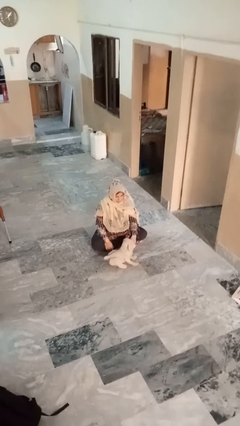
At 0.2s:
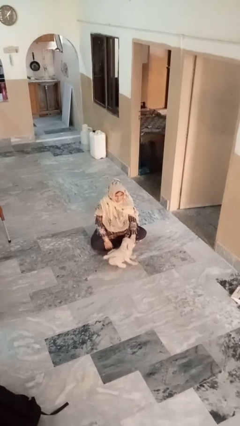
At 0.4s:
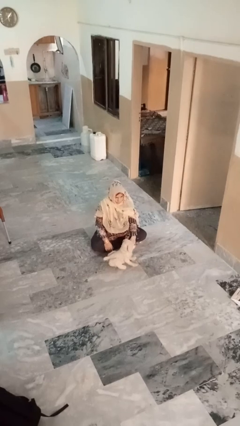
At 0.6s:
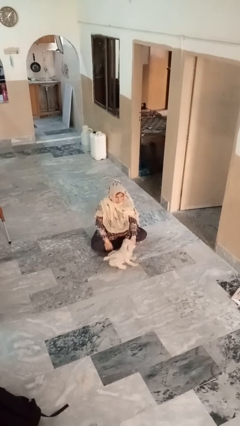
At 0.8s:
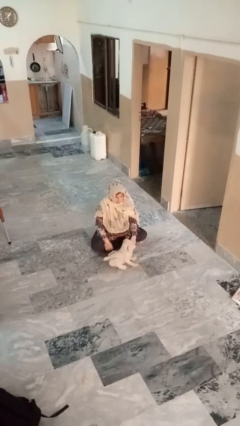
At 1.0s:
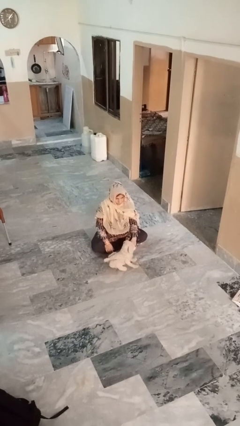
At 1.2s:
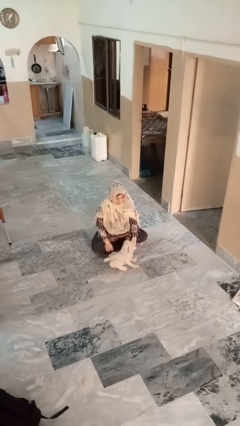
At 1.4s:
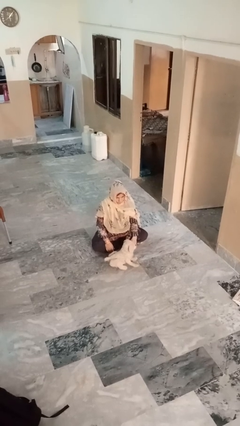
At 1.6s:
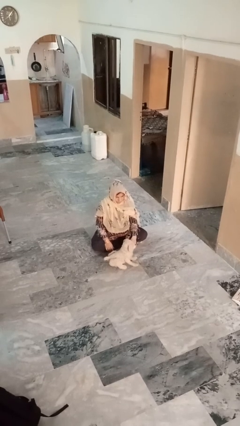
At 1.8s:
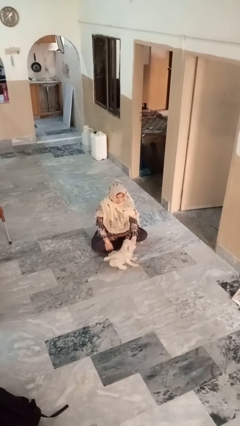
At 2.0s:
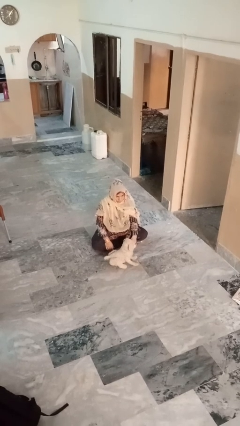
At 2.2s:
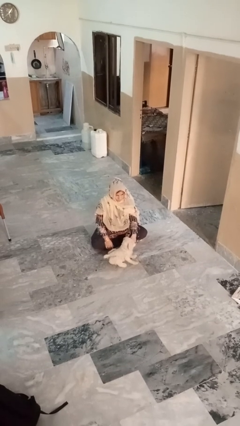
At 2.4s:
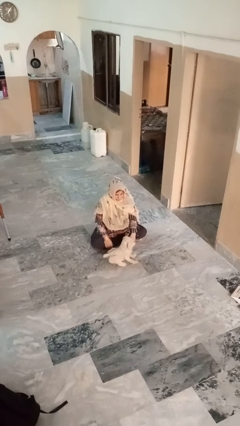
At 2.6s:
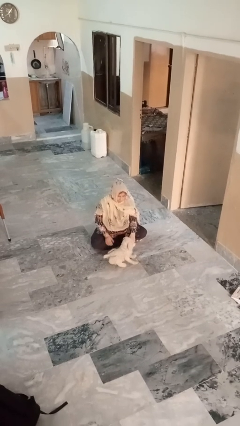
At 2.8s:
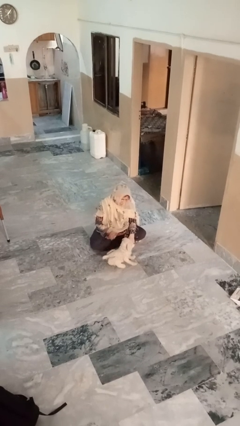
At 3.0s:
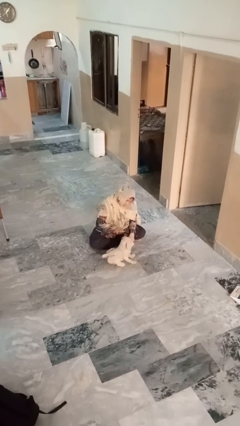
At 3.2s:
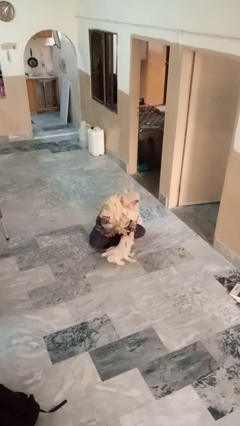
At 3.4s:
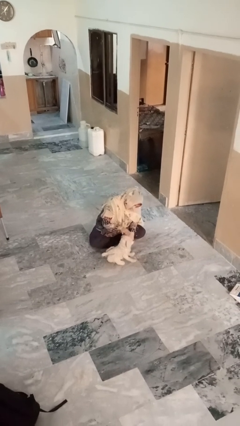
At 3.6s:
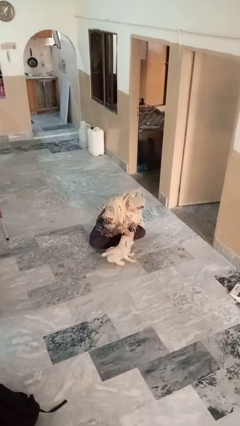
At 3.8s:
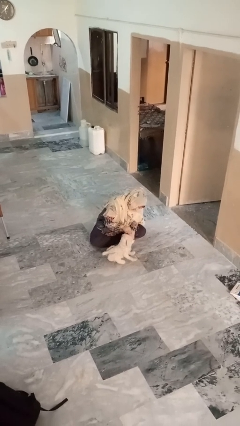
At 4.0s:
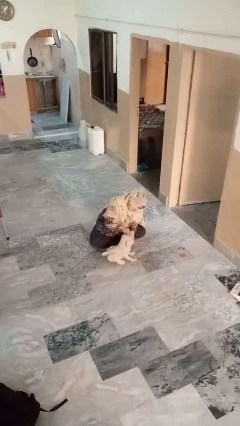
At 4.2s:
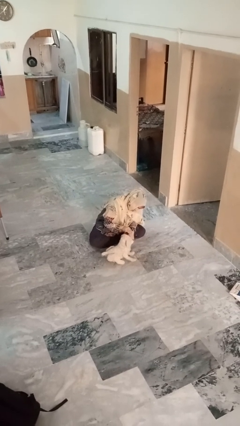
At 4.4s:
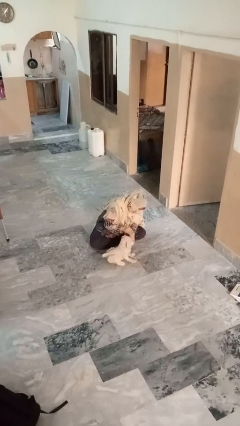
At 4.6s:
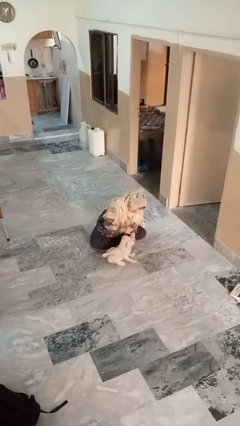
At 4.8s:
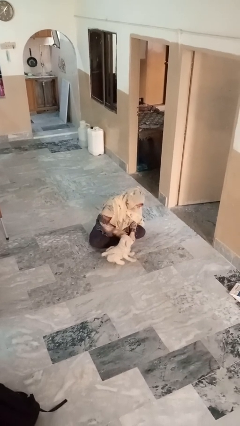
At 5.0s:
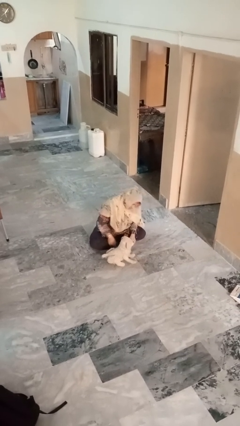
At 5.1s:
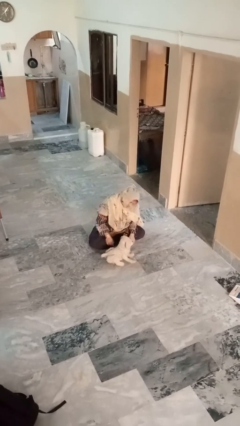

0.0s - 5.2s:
person pets dog

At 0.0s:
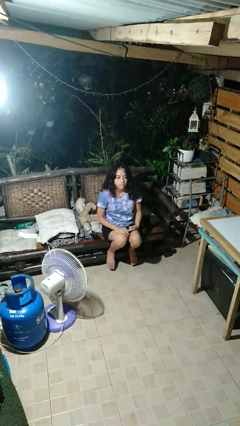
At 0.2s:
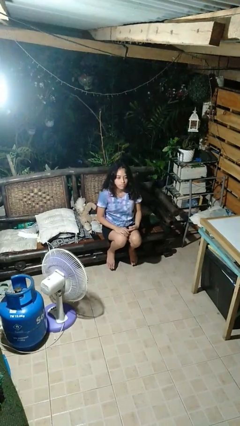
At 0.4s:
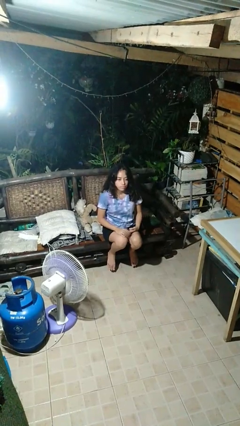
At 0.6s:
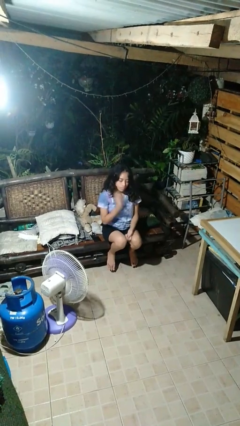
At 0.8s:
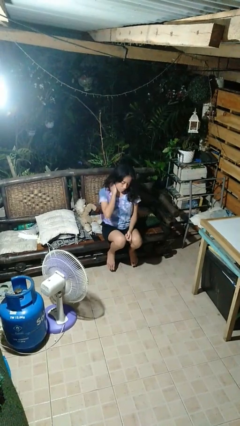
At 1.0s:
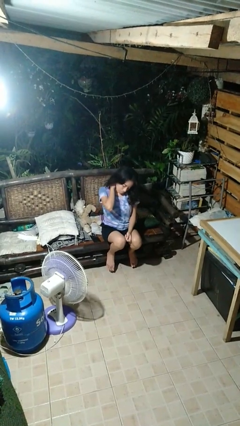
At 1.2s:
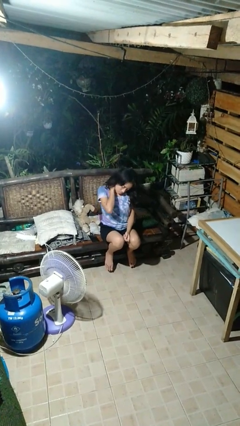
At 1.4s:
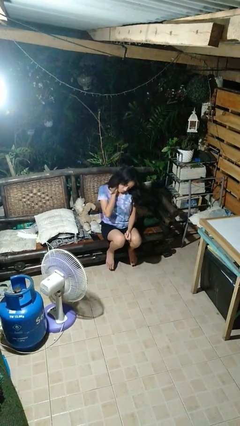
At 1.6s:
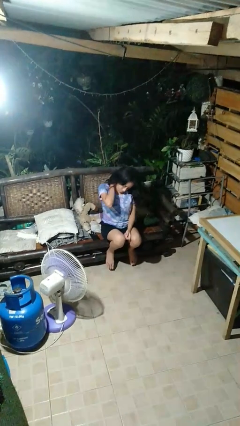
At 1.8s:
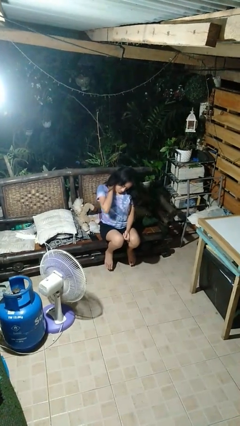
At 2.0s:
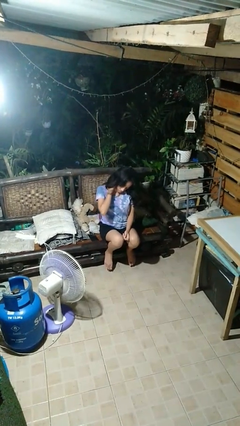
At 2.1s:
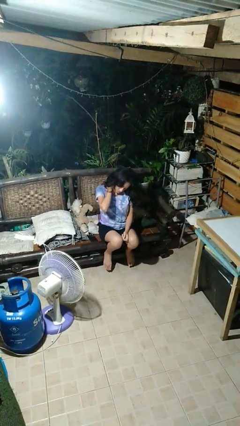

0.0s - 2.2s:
person rubs neck

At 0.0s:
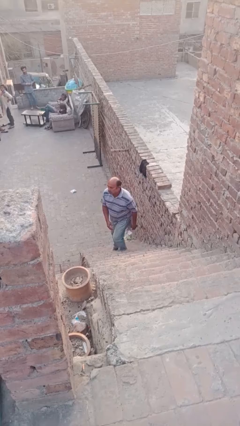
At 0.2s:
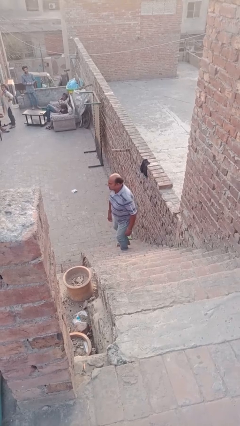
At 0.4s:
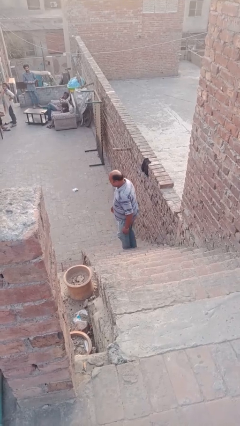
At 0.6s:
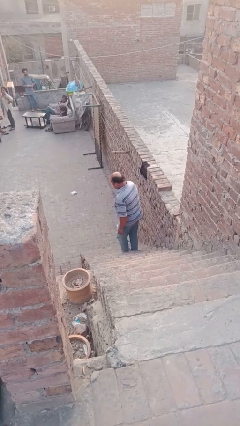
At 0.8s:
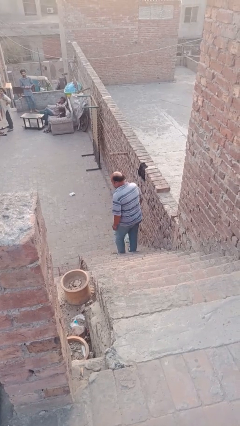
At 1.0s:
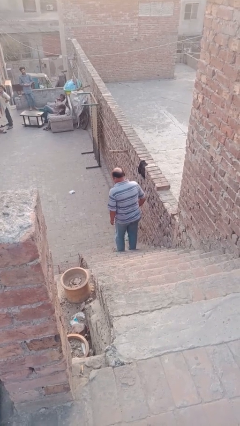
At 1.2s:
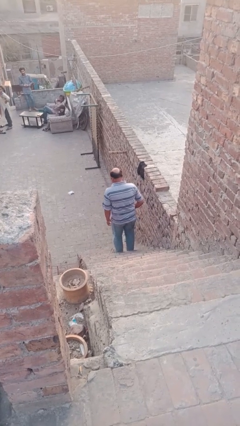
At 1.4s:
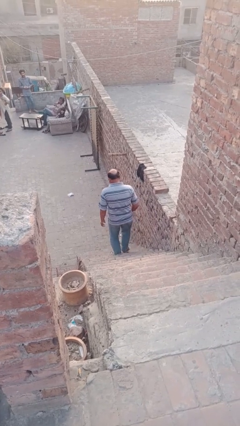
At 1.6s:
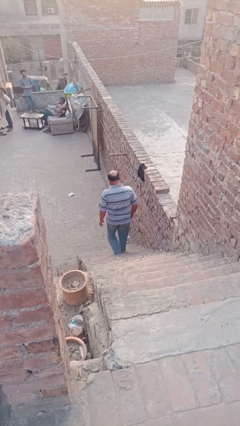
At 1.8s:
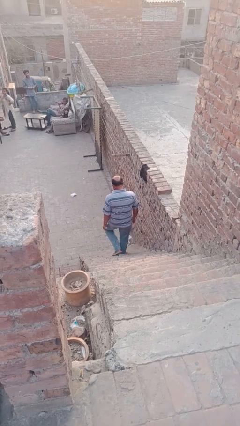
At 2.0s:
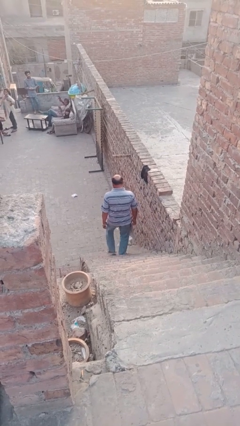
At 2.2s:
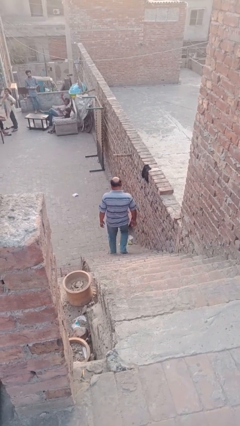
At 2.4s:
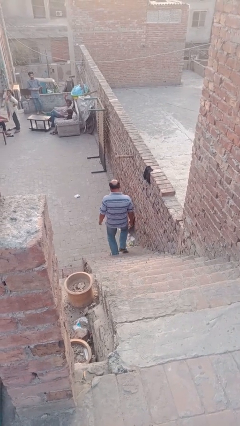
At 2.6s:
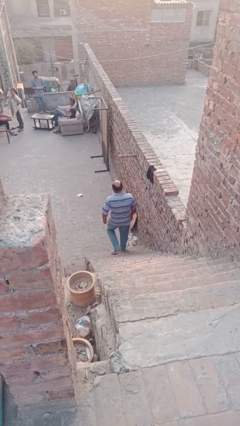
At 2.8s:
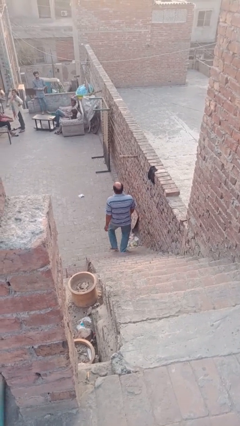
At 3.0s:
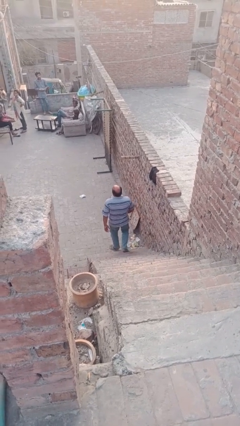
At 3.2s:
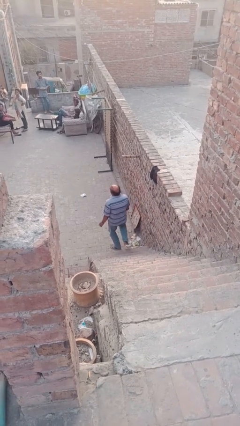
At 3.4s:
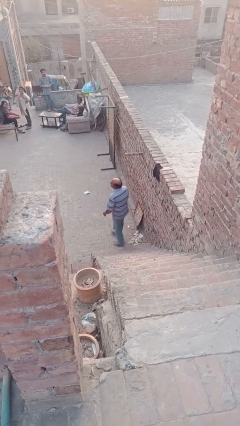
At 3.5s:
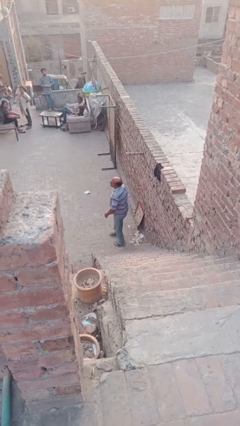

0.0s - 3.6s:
person climbs down stairs

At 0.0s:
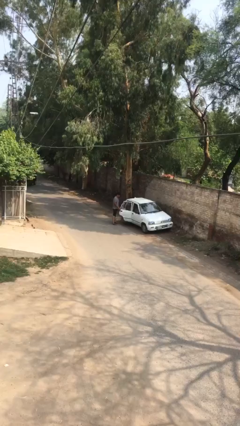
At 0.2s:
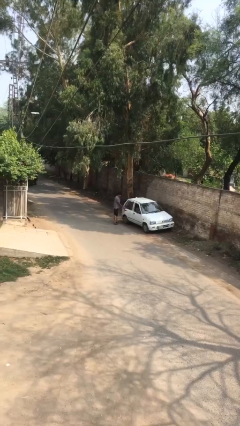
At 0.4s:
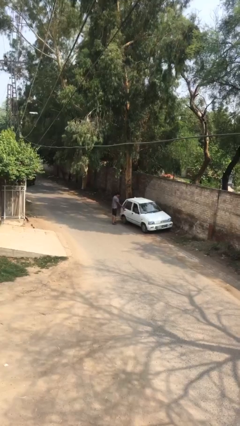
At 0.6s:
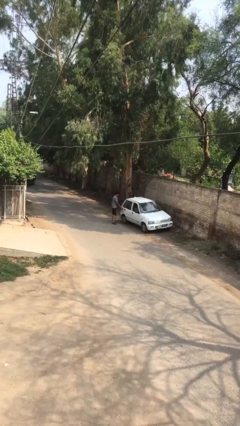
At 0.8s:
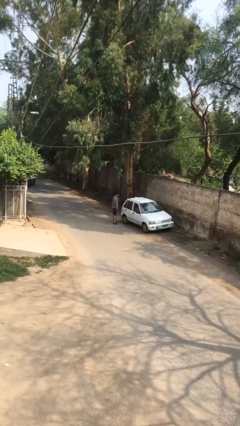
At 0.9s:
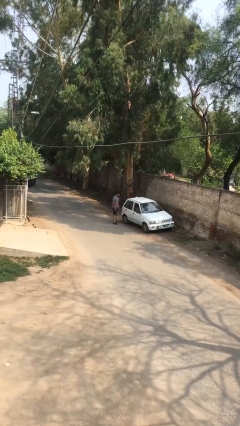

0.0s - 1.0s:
person closes car door

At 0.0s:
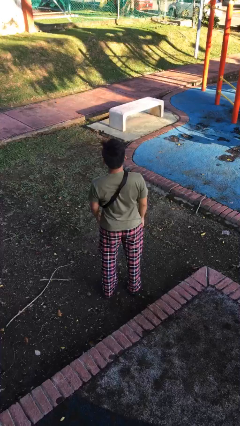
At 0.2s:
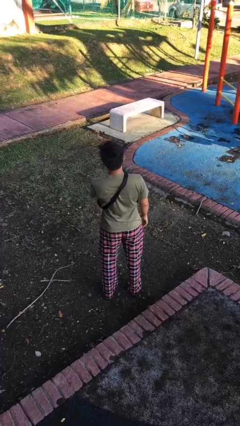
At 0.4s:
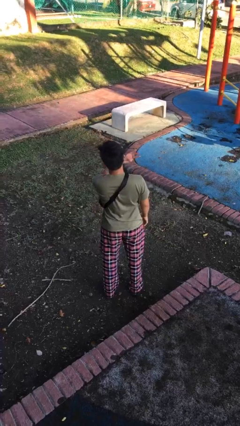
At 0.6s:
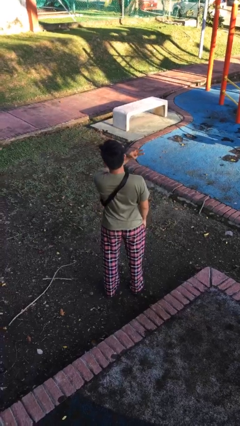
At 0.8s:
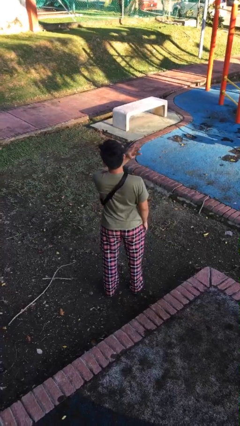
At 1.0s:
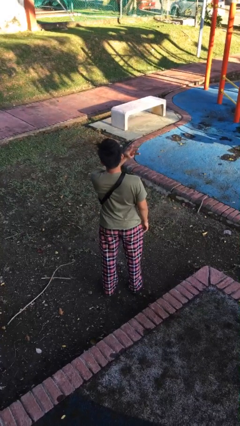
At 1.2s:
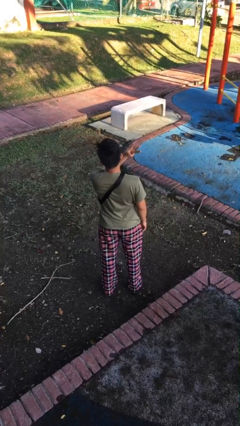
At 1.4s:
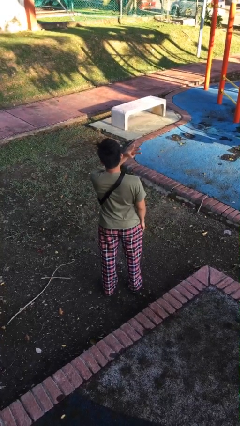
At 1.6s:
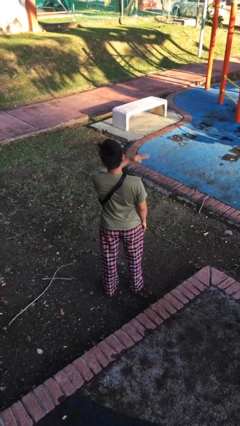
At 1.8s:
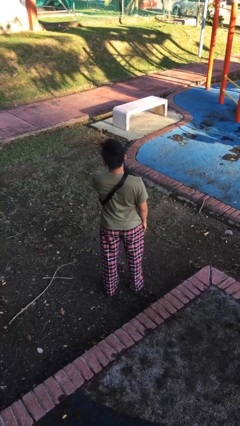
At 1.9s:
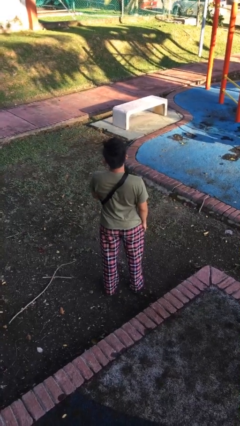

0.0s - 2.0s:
person gestures number three

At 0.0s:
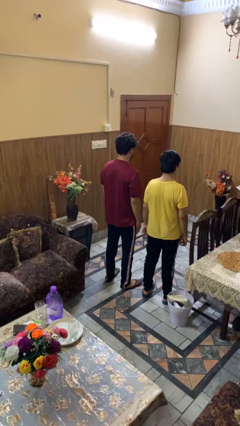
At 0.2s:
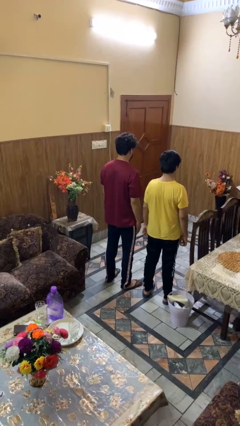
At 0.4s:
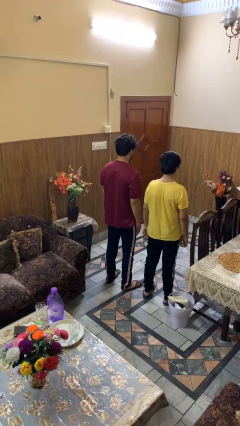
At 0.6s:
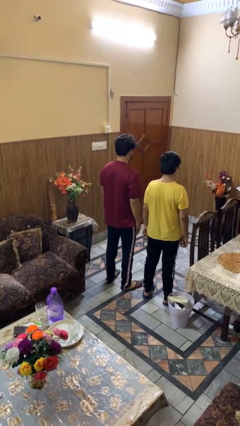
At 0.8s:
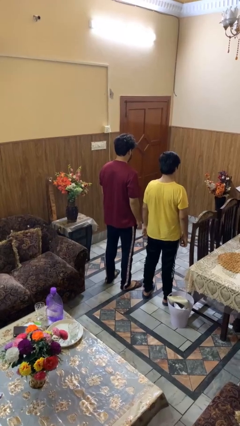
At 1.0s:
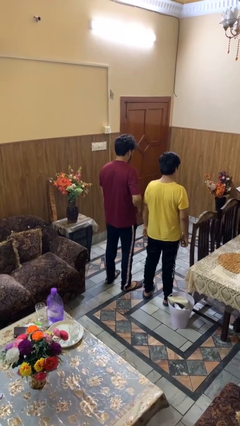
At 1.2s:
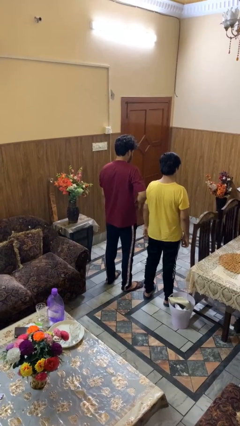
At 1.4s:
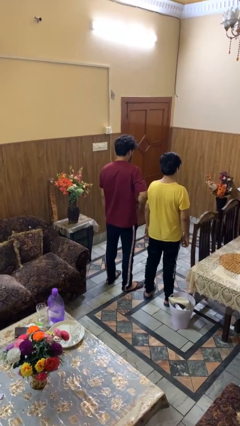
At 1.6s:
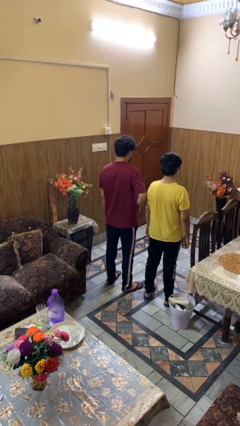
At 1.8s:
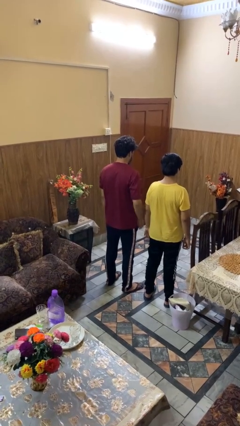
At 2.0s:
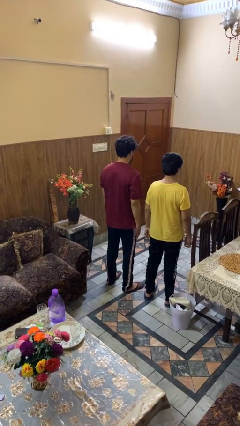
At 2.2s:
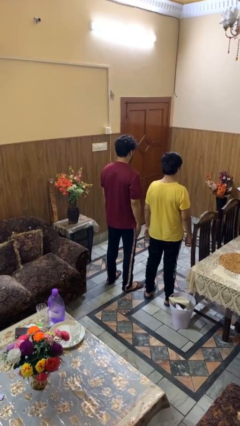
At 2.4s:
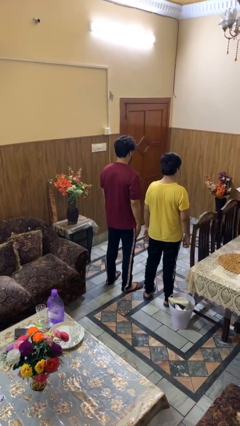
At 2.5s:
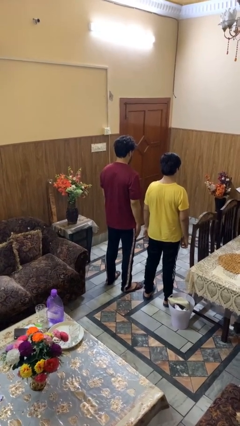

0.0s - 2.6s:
person nudges person with elbow

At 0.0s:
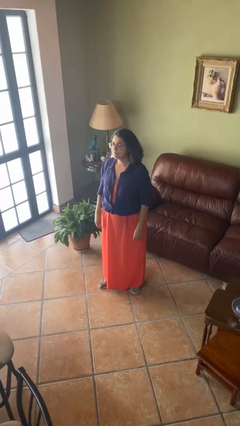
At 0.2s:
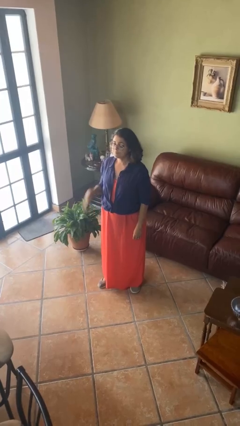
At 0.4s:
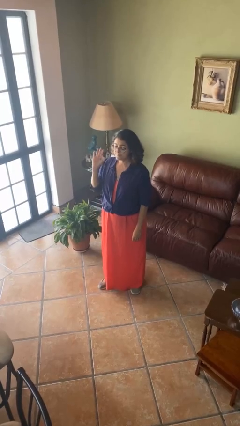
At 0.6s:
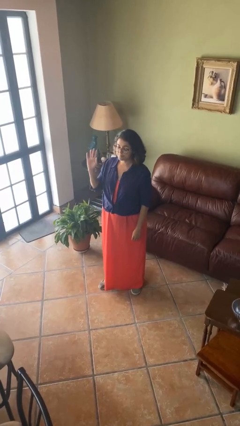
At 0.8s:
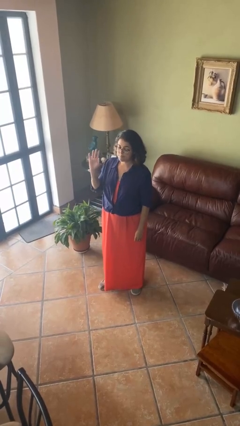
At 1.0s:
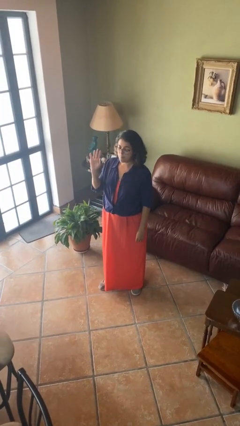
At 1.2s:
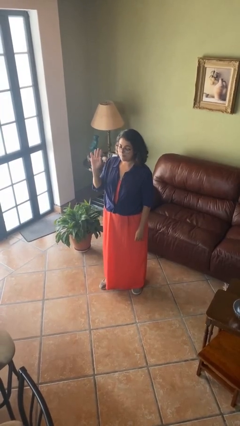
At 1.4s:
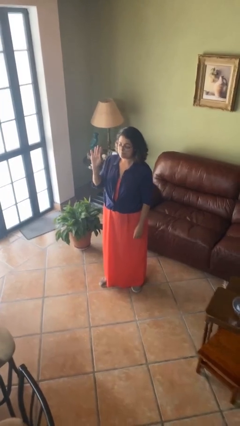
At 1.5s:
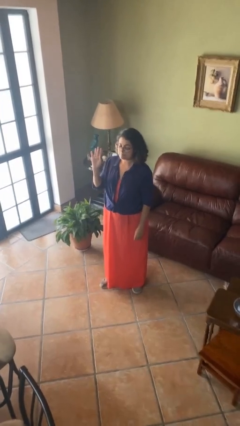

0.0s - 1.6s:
person gestures raise hand
